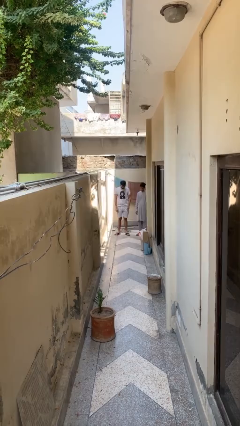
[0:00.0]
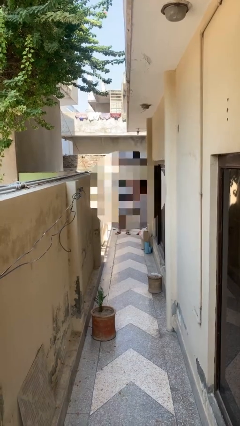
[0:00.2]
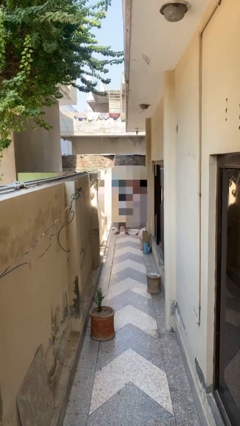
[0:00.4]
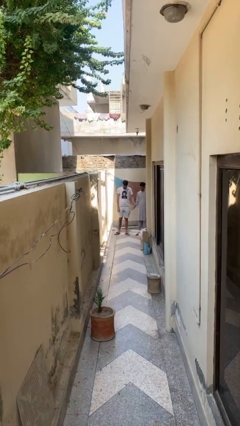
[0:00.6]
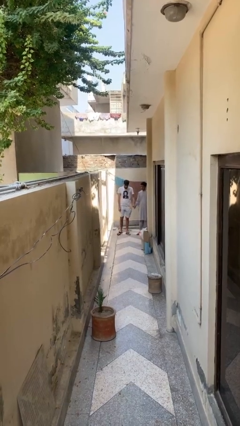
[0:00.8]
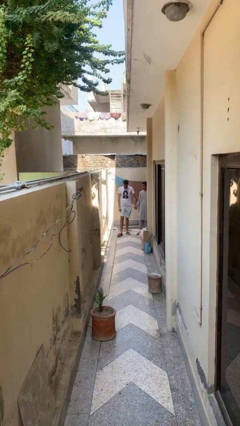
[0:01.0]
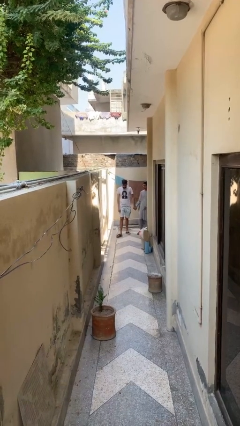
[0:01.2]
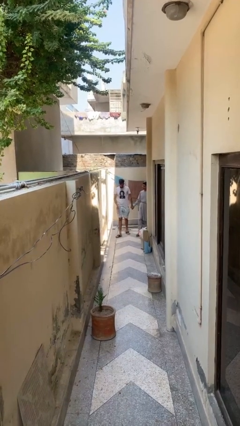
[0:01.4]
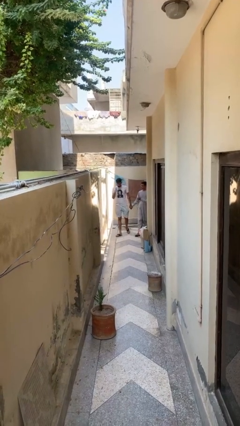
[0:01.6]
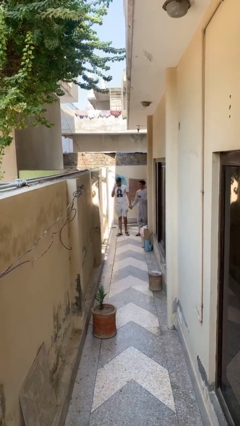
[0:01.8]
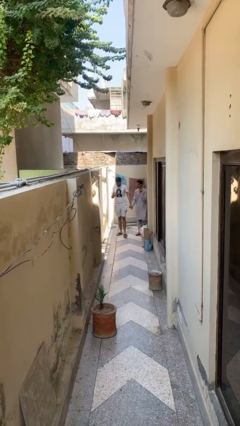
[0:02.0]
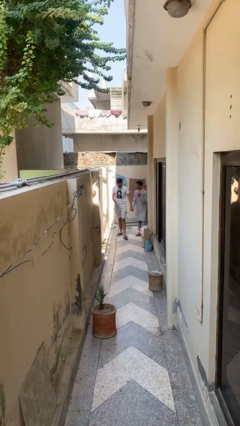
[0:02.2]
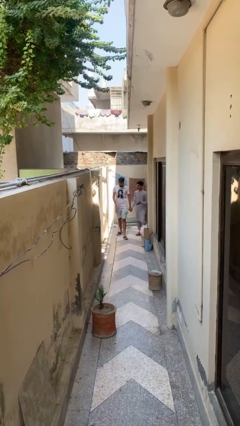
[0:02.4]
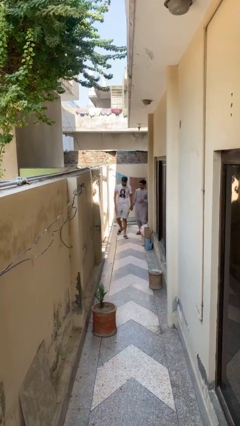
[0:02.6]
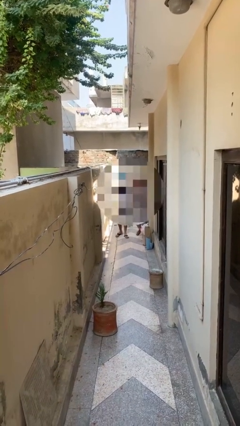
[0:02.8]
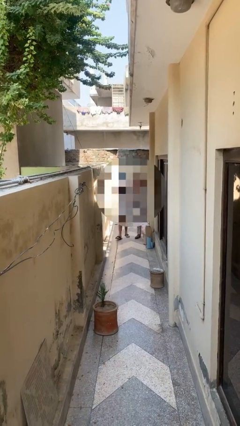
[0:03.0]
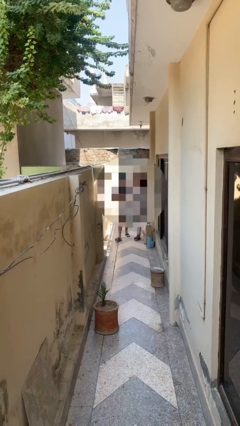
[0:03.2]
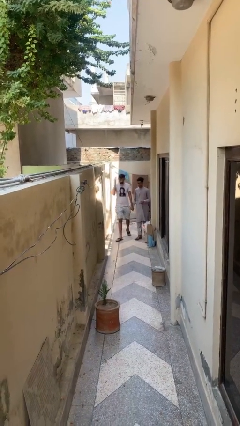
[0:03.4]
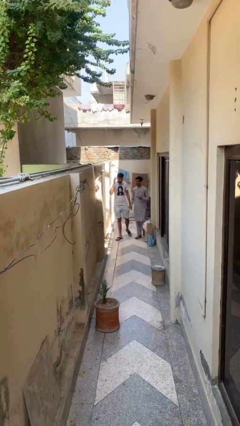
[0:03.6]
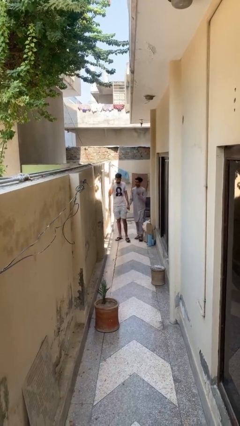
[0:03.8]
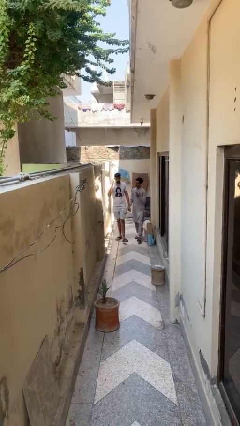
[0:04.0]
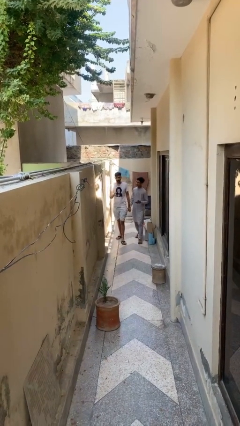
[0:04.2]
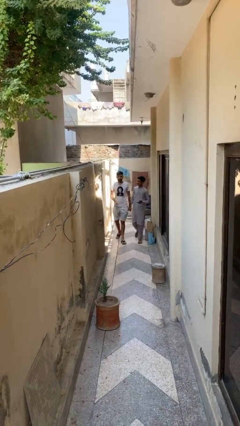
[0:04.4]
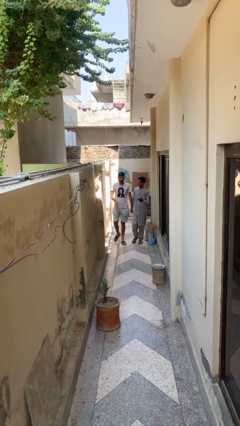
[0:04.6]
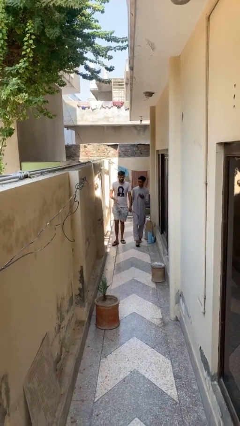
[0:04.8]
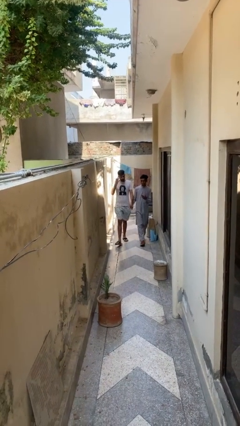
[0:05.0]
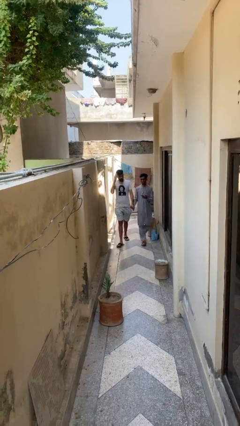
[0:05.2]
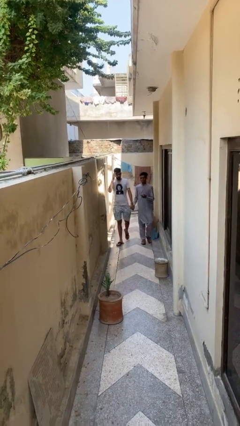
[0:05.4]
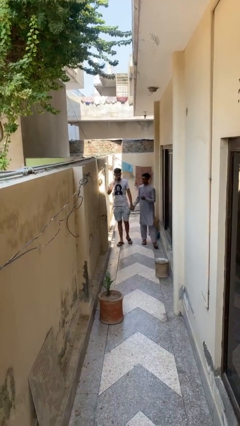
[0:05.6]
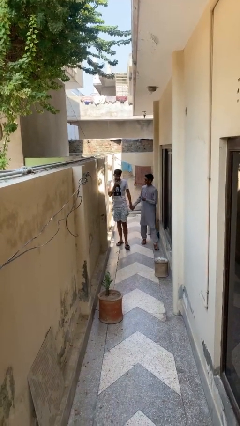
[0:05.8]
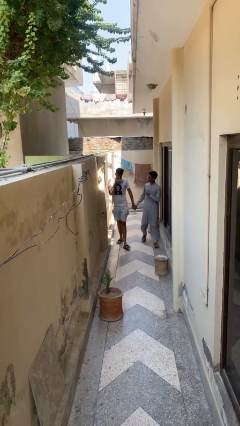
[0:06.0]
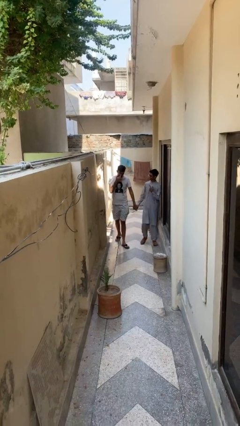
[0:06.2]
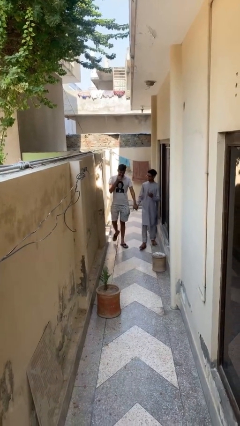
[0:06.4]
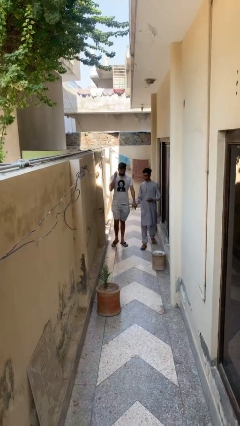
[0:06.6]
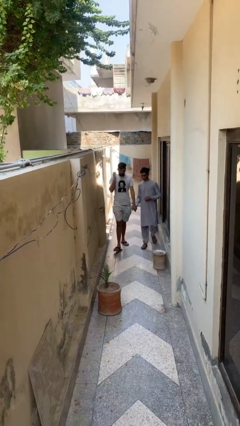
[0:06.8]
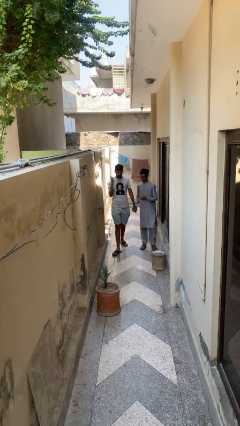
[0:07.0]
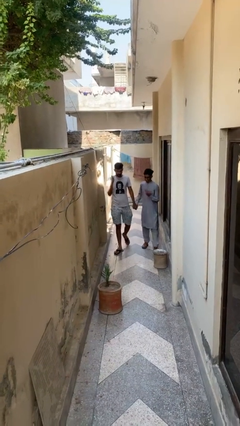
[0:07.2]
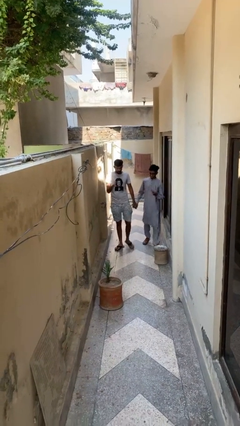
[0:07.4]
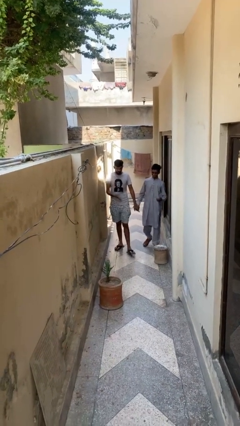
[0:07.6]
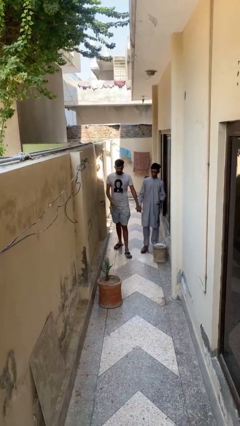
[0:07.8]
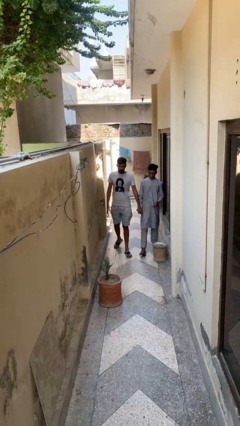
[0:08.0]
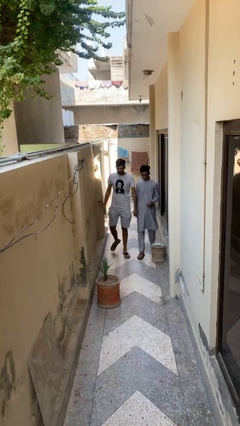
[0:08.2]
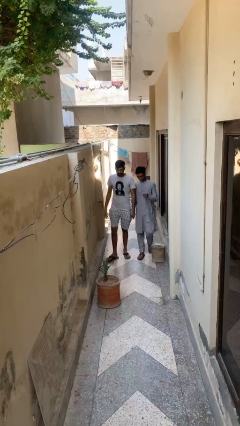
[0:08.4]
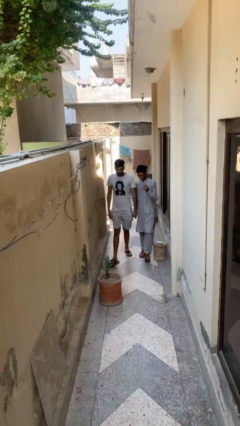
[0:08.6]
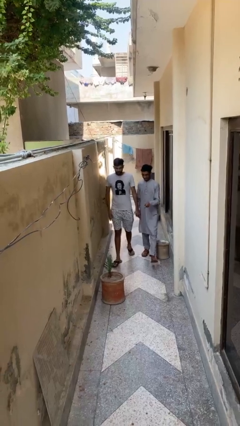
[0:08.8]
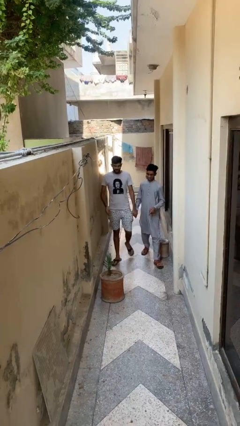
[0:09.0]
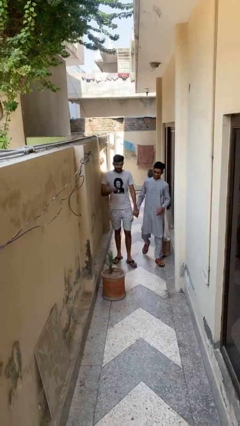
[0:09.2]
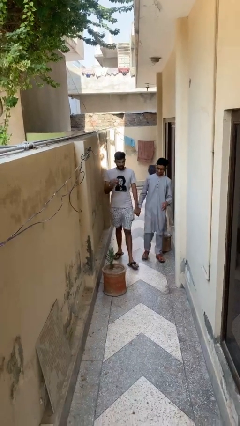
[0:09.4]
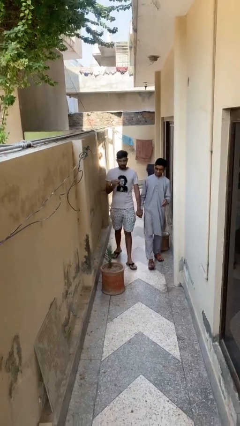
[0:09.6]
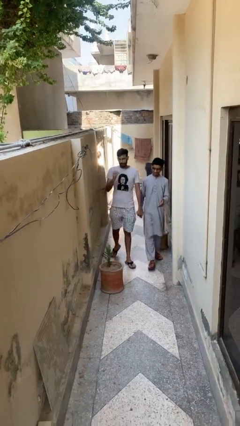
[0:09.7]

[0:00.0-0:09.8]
person holds hand

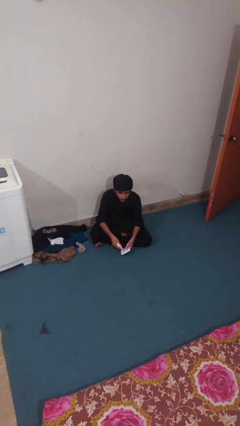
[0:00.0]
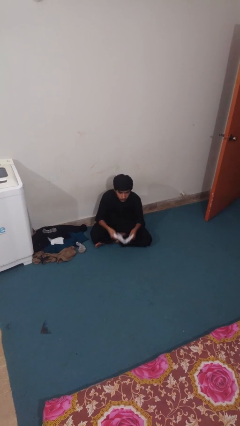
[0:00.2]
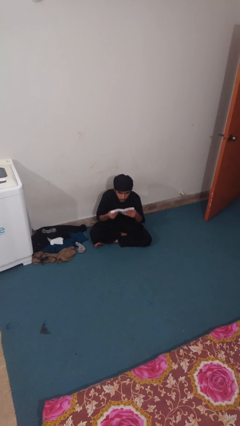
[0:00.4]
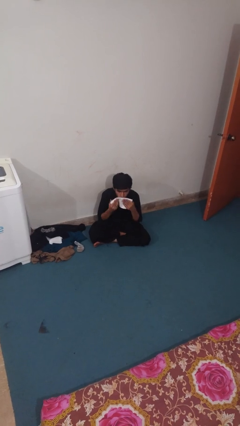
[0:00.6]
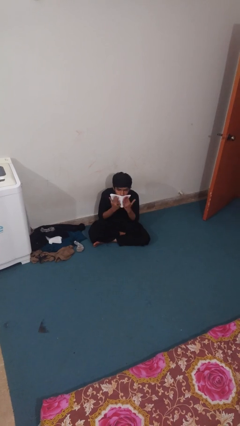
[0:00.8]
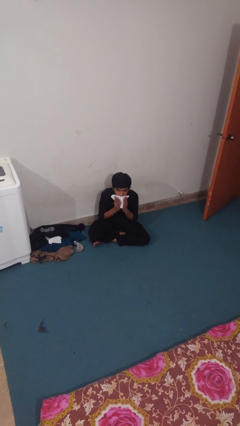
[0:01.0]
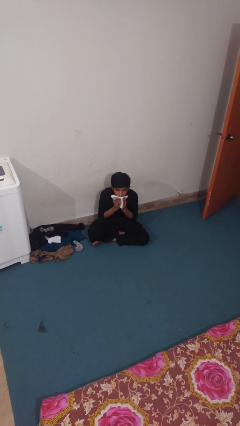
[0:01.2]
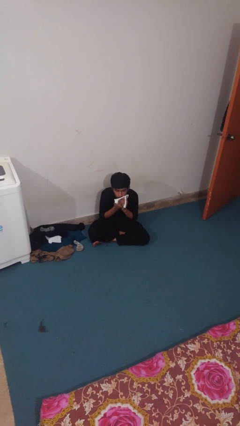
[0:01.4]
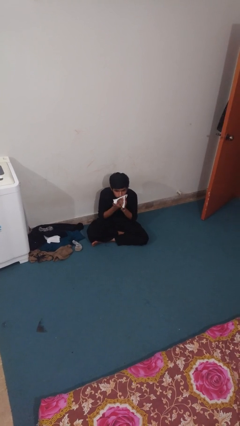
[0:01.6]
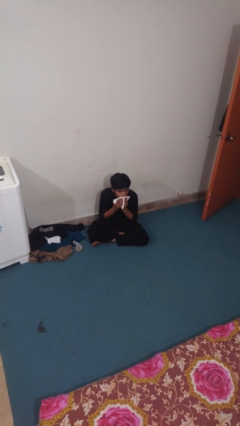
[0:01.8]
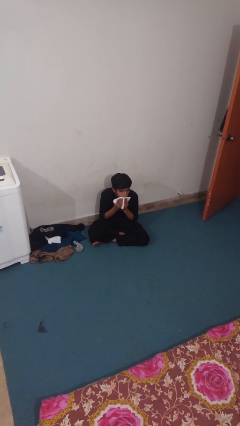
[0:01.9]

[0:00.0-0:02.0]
person wipes mouth with napkin

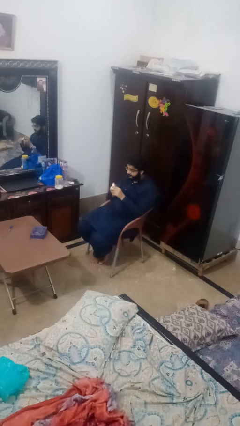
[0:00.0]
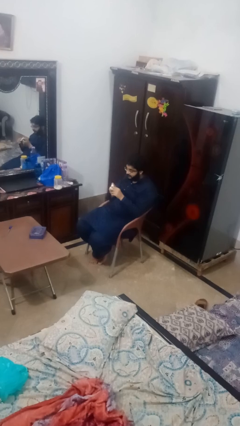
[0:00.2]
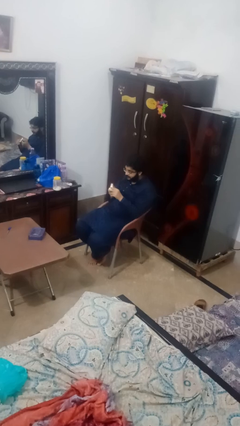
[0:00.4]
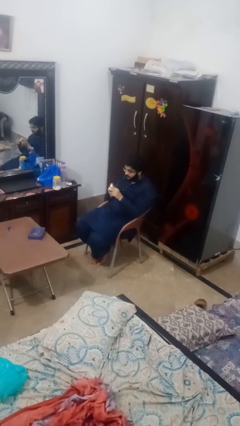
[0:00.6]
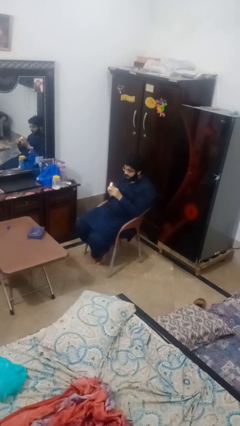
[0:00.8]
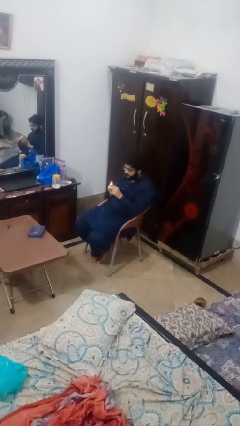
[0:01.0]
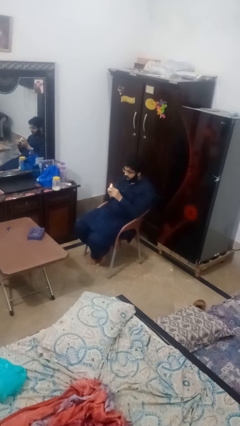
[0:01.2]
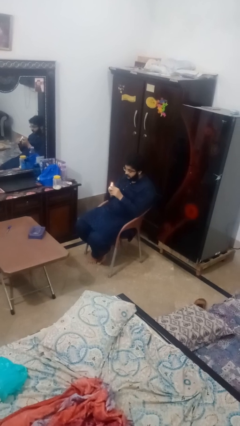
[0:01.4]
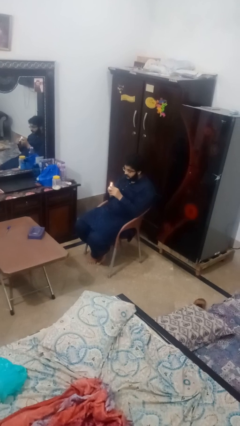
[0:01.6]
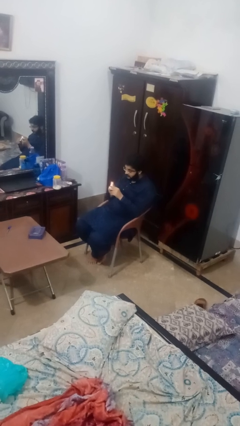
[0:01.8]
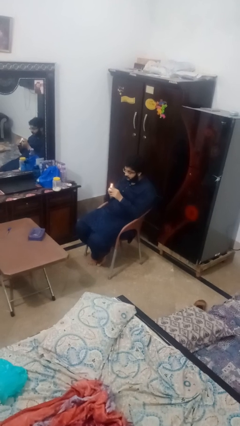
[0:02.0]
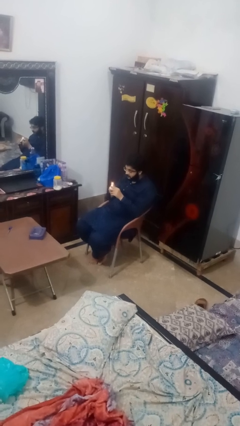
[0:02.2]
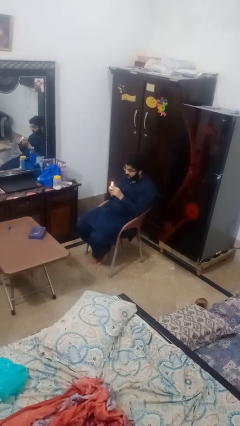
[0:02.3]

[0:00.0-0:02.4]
person lights candle

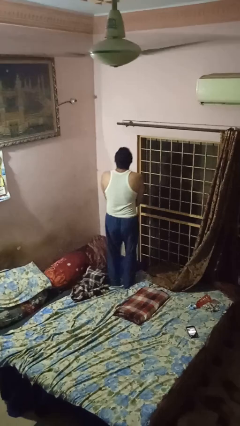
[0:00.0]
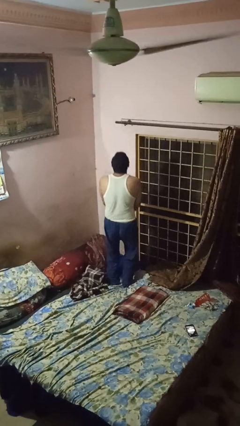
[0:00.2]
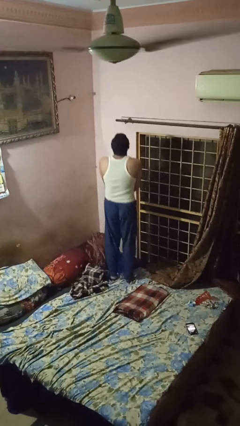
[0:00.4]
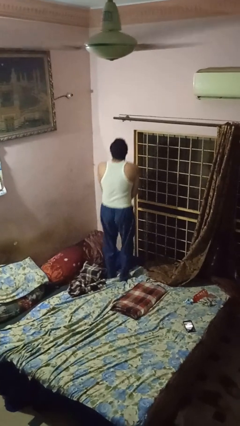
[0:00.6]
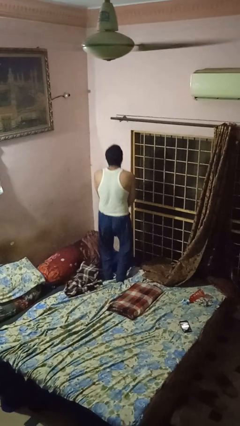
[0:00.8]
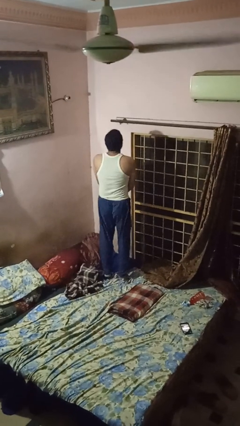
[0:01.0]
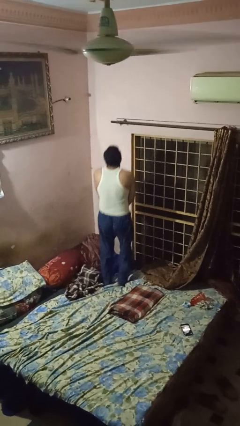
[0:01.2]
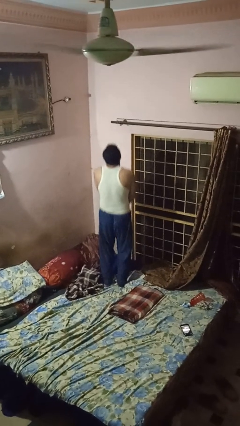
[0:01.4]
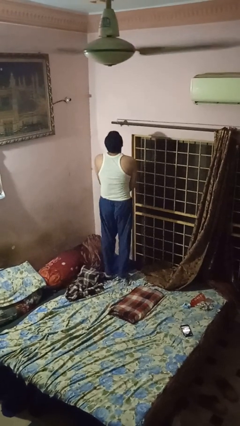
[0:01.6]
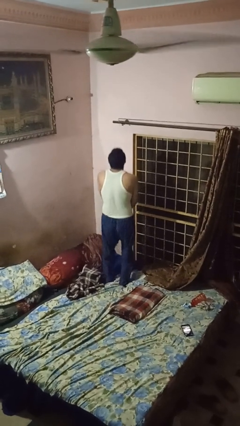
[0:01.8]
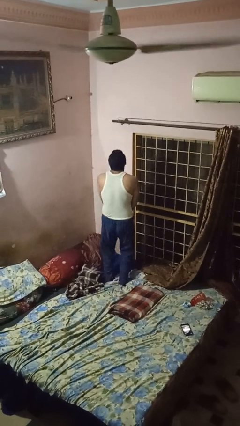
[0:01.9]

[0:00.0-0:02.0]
person jumps on bed

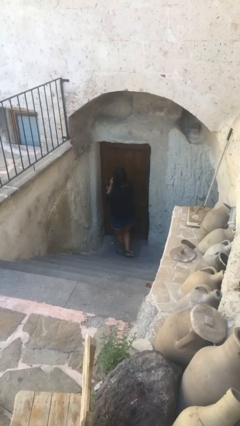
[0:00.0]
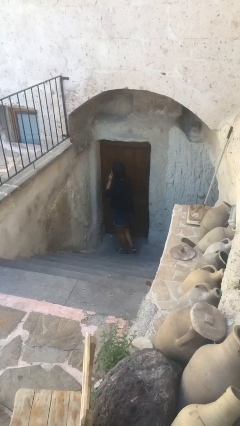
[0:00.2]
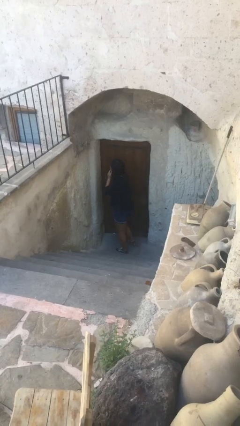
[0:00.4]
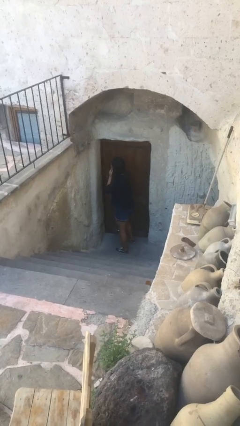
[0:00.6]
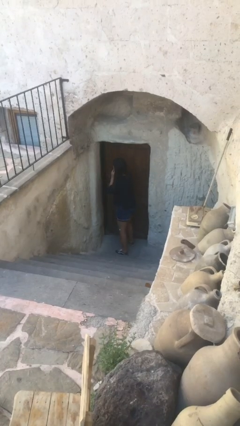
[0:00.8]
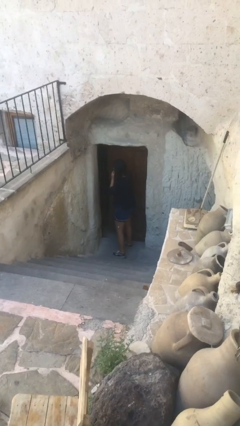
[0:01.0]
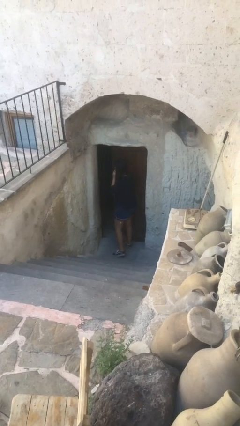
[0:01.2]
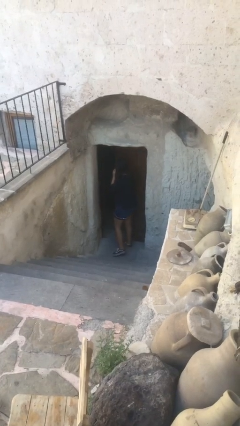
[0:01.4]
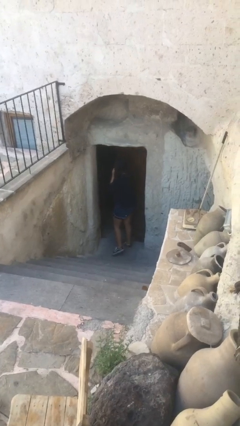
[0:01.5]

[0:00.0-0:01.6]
person opens facility door
